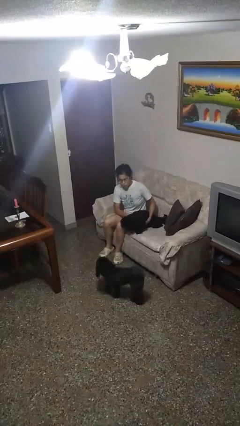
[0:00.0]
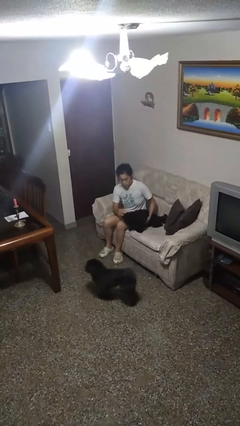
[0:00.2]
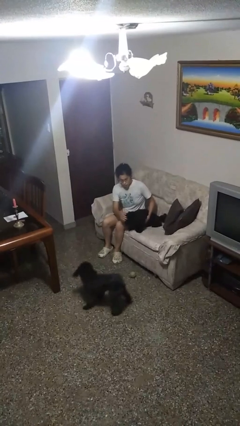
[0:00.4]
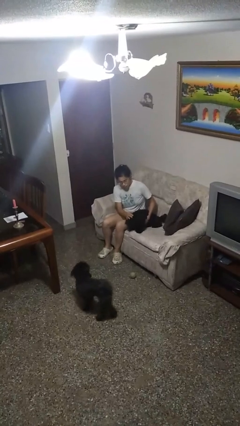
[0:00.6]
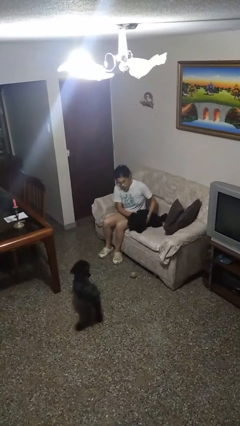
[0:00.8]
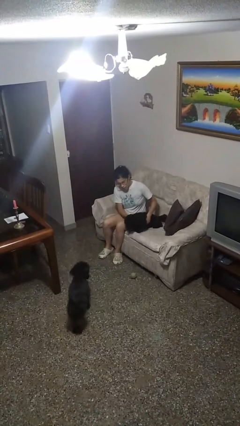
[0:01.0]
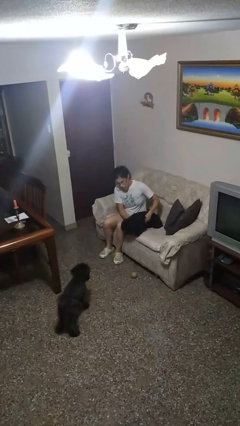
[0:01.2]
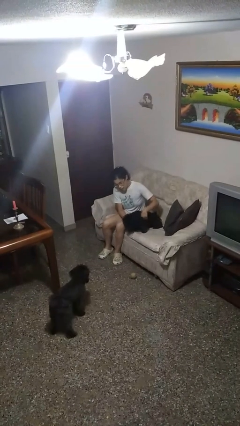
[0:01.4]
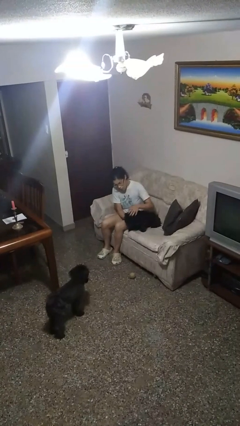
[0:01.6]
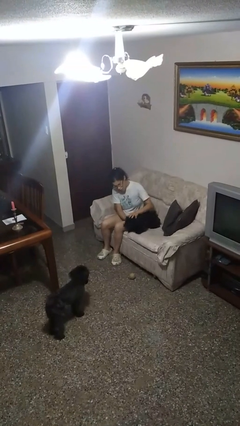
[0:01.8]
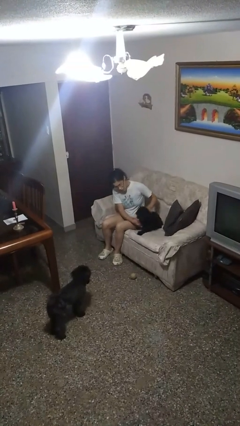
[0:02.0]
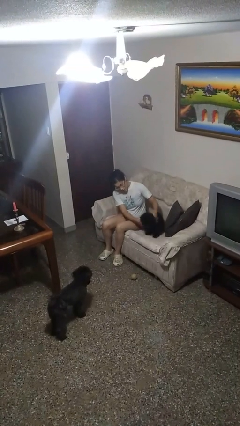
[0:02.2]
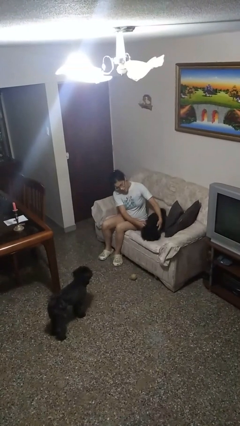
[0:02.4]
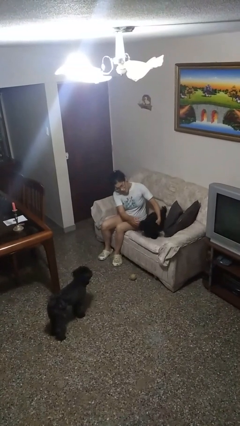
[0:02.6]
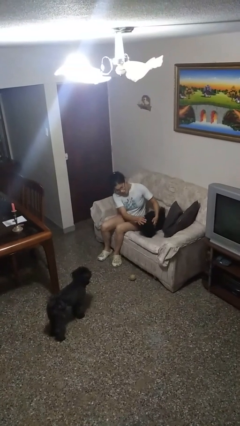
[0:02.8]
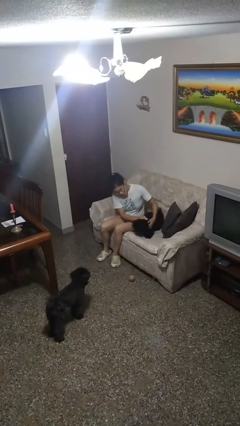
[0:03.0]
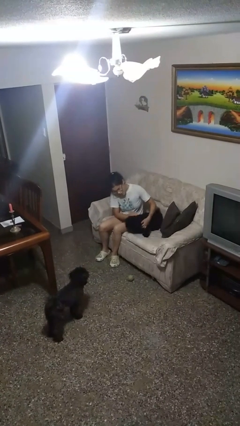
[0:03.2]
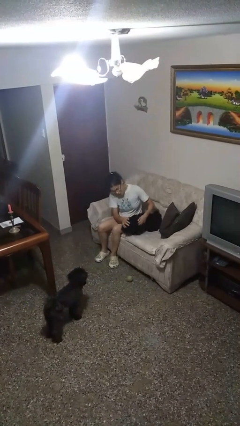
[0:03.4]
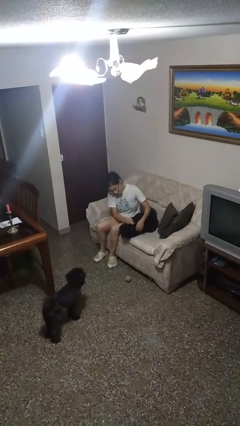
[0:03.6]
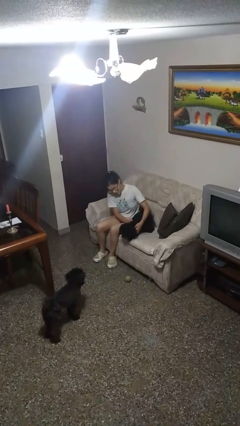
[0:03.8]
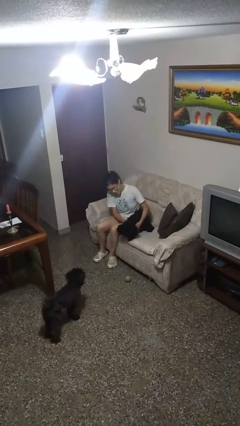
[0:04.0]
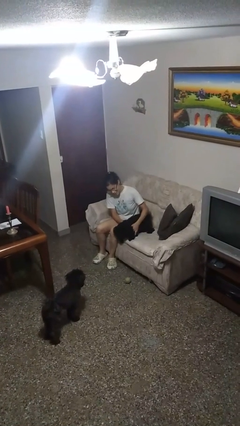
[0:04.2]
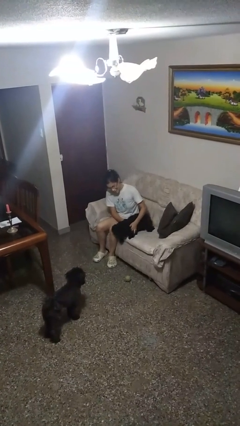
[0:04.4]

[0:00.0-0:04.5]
person pets dog

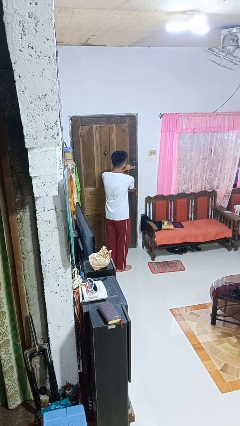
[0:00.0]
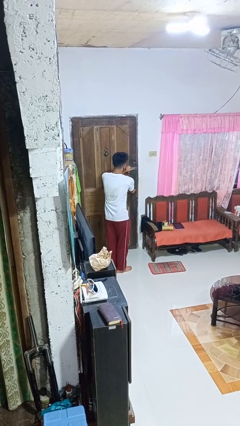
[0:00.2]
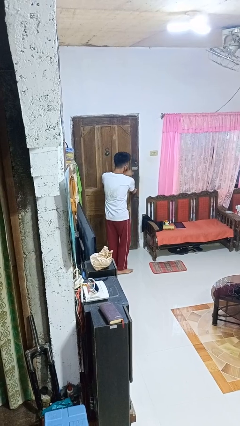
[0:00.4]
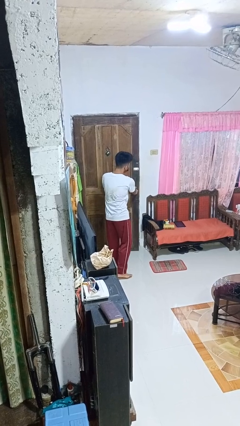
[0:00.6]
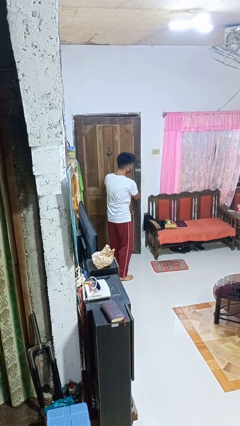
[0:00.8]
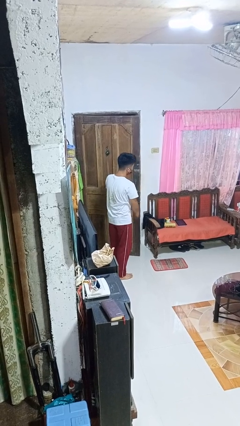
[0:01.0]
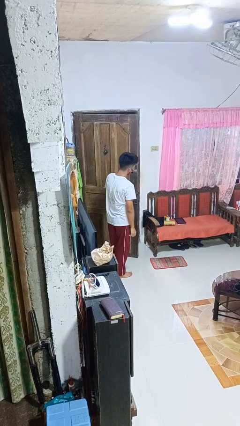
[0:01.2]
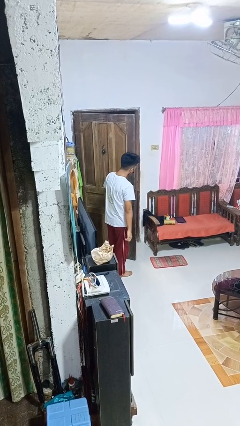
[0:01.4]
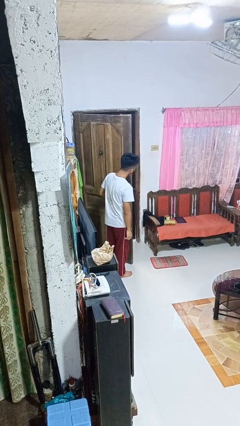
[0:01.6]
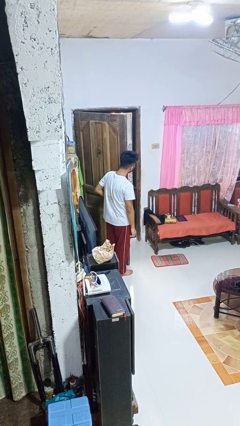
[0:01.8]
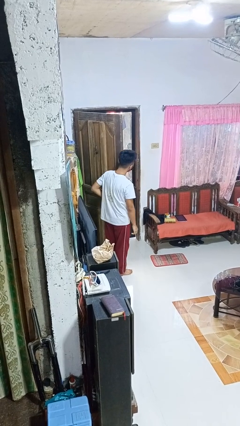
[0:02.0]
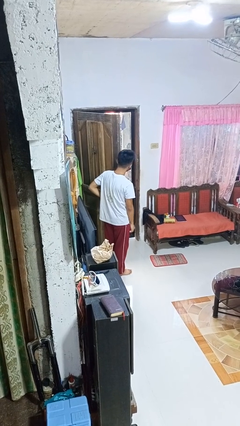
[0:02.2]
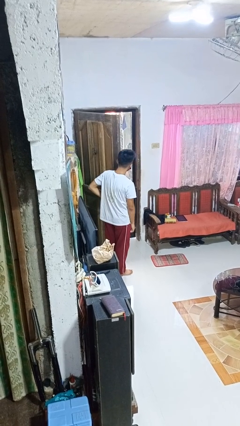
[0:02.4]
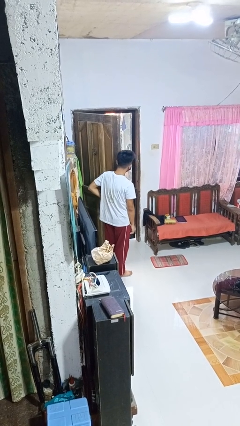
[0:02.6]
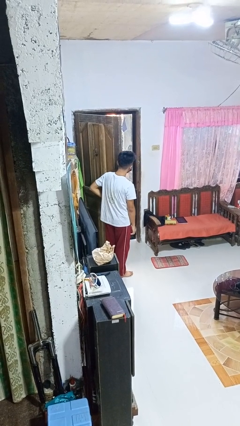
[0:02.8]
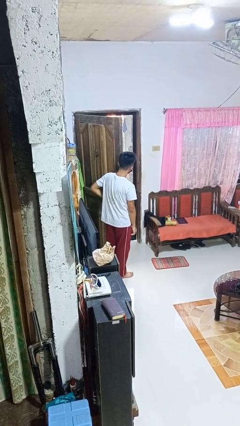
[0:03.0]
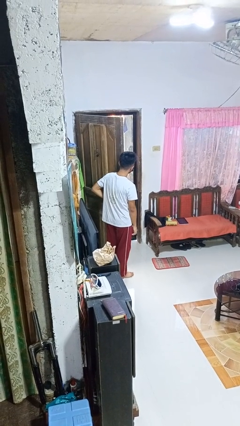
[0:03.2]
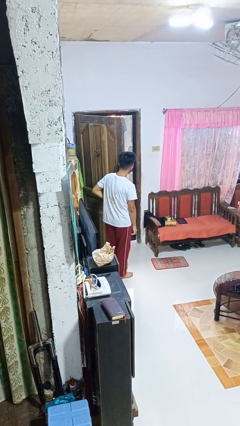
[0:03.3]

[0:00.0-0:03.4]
person opens facility door

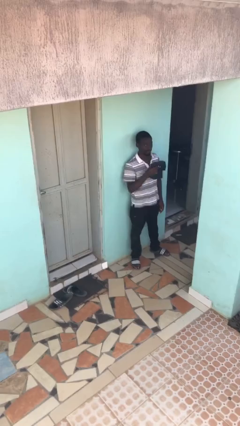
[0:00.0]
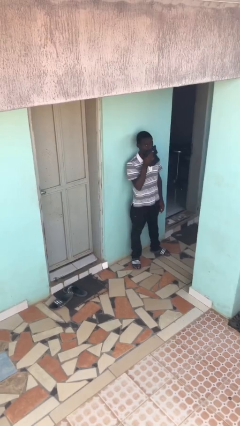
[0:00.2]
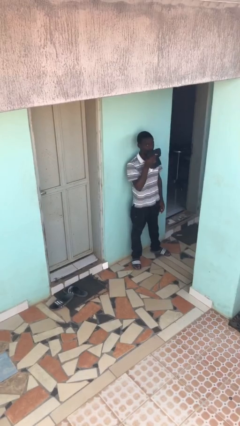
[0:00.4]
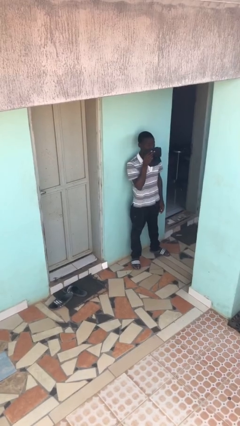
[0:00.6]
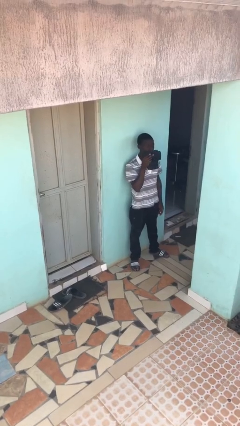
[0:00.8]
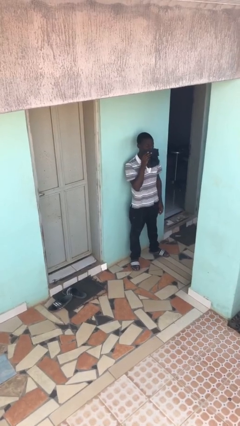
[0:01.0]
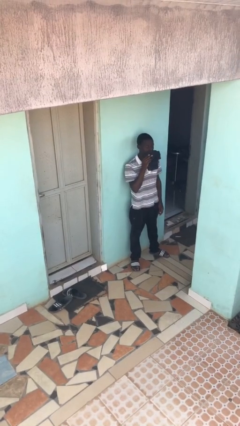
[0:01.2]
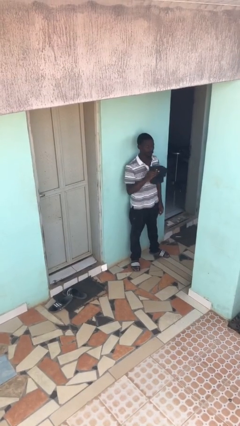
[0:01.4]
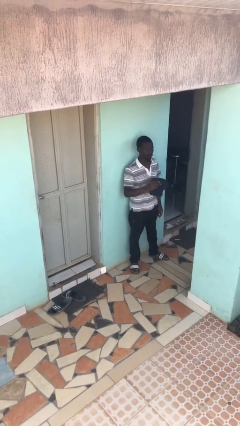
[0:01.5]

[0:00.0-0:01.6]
person wipes mouth with napkin

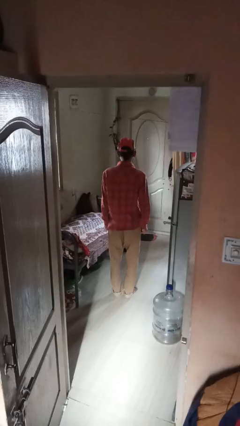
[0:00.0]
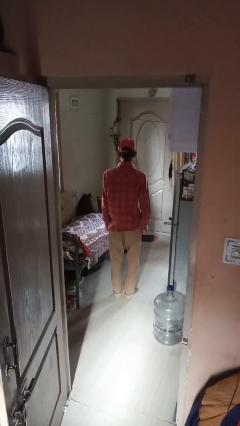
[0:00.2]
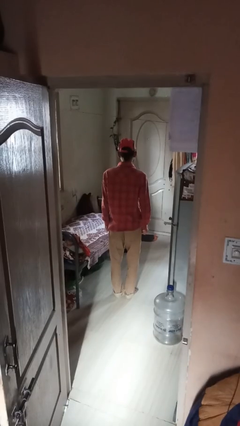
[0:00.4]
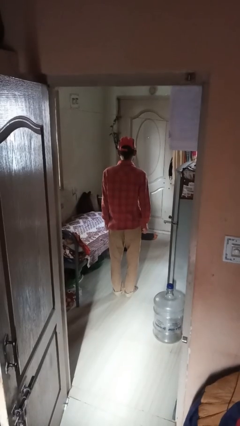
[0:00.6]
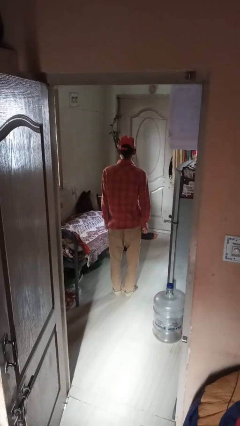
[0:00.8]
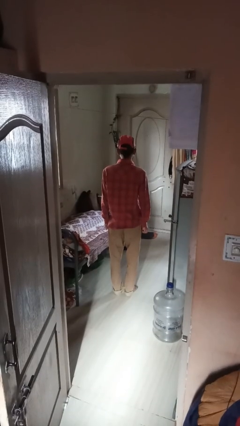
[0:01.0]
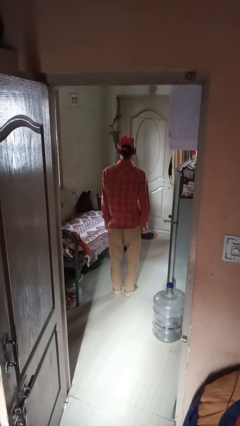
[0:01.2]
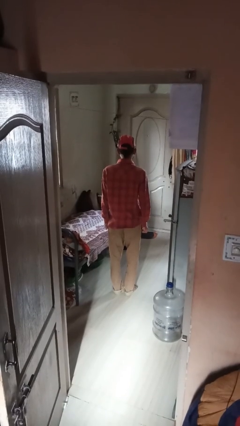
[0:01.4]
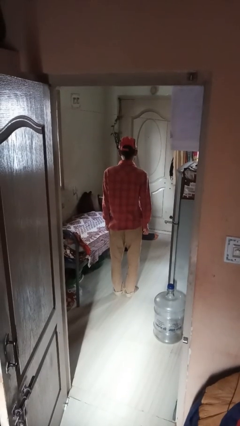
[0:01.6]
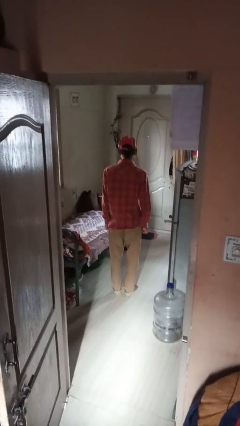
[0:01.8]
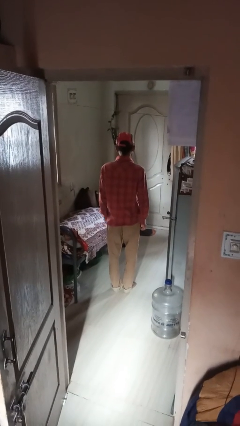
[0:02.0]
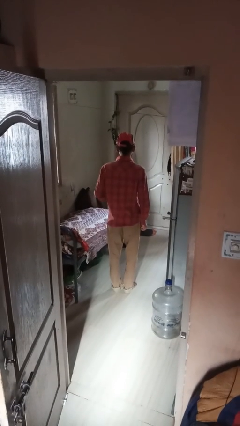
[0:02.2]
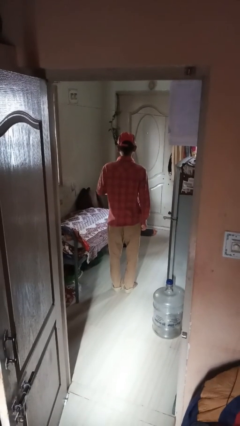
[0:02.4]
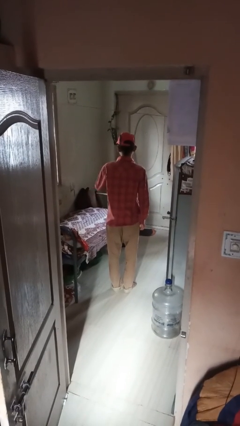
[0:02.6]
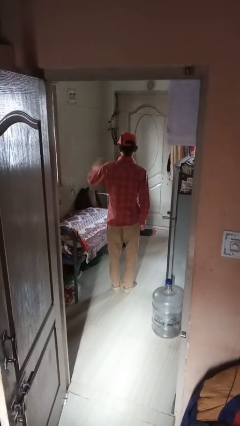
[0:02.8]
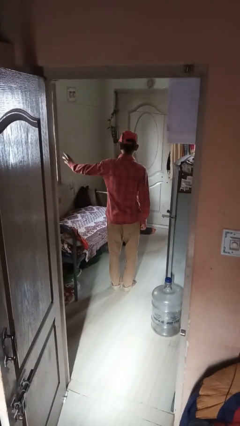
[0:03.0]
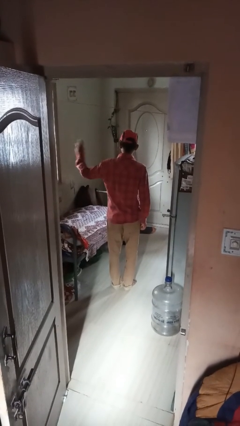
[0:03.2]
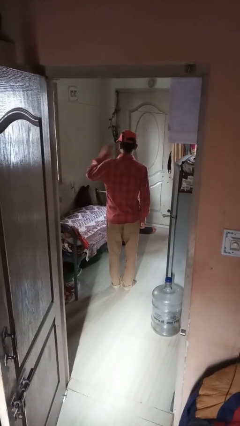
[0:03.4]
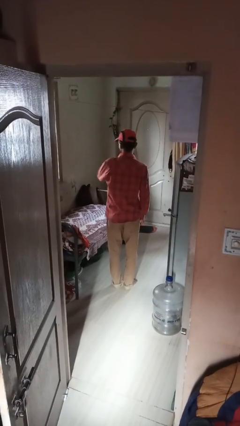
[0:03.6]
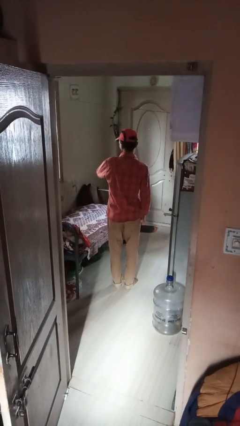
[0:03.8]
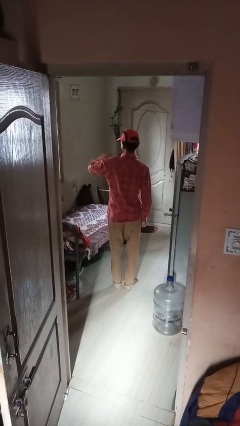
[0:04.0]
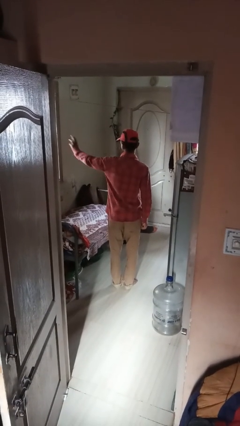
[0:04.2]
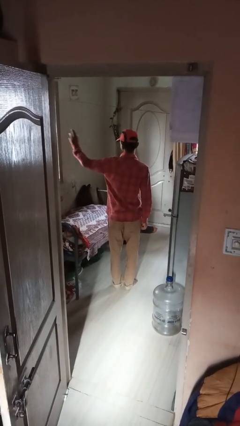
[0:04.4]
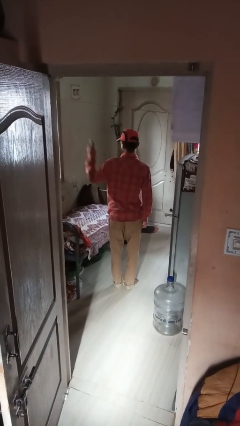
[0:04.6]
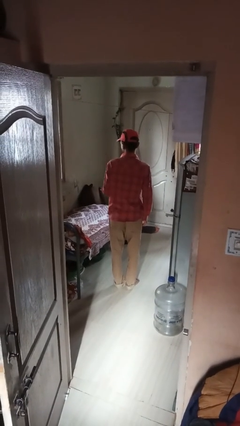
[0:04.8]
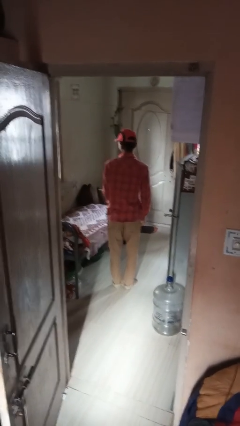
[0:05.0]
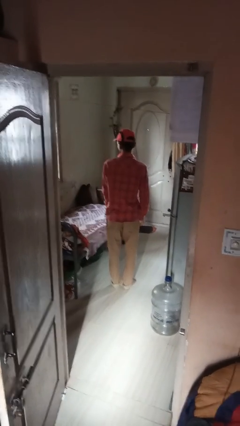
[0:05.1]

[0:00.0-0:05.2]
person gestures swipe left

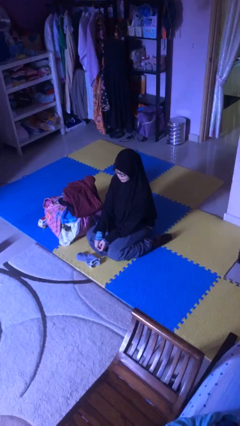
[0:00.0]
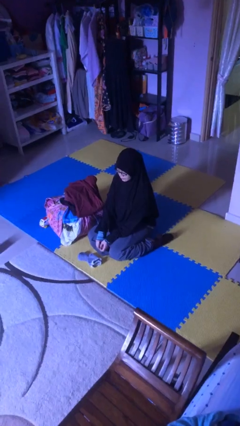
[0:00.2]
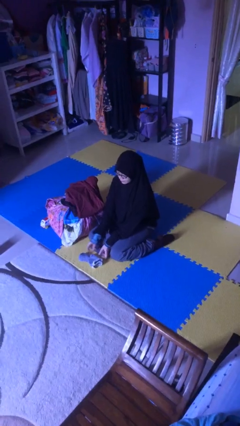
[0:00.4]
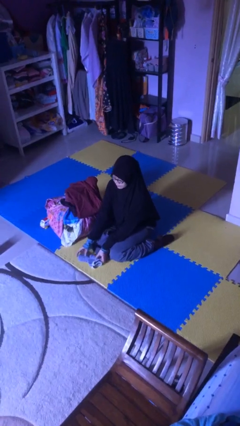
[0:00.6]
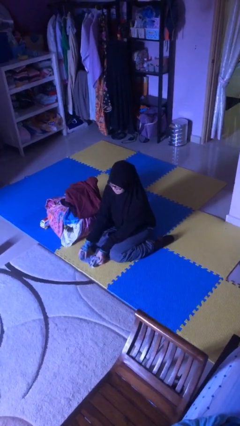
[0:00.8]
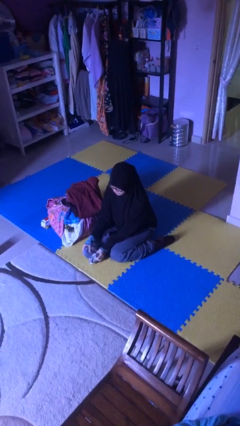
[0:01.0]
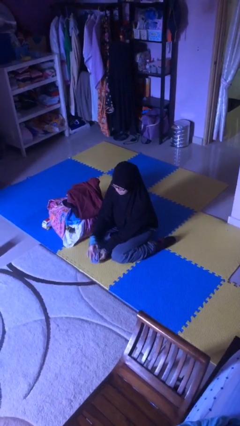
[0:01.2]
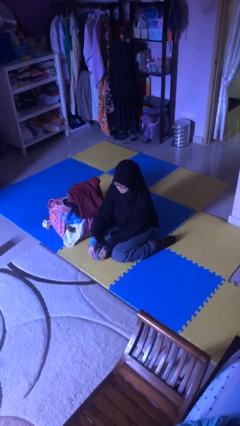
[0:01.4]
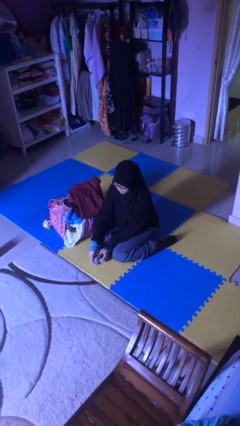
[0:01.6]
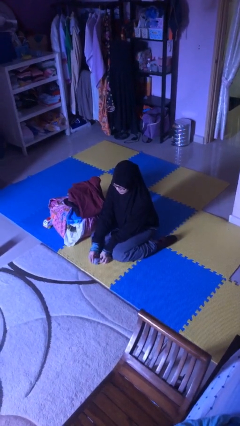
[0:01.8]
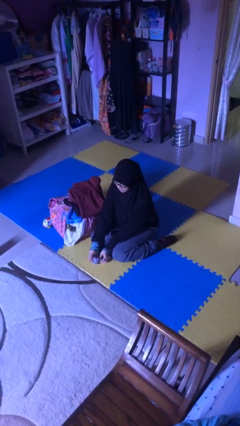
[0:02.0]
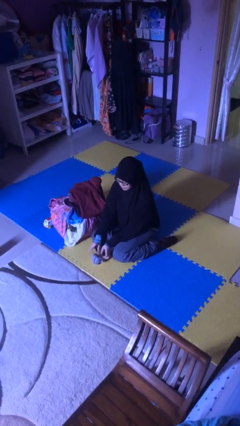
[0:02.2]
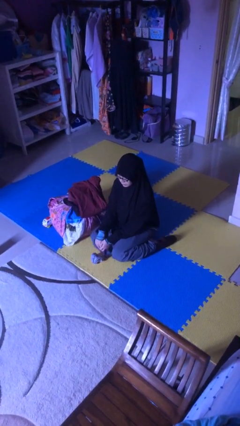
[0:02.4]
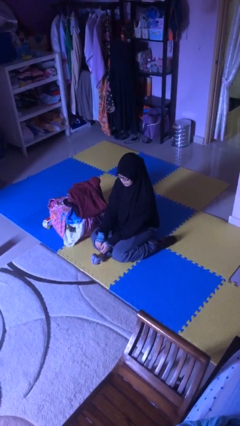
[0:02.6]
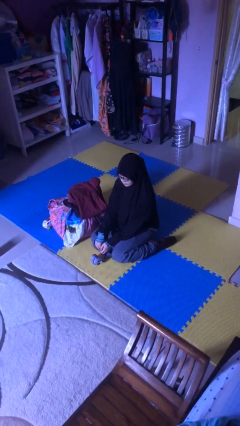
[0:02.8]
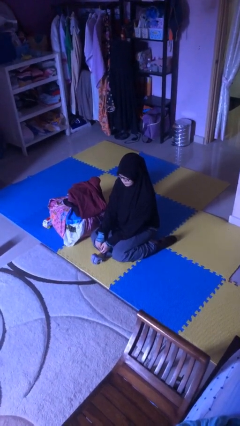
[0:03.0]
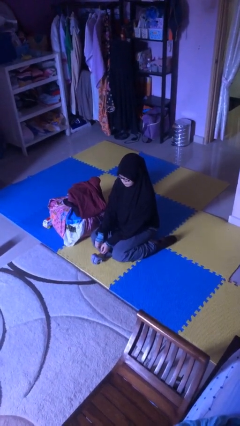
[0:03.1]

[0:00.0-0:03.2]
person folds socks
